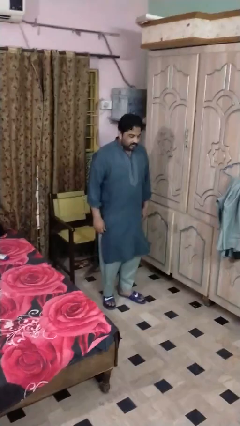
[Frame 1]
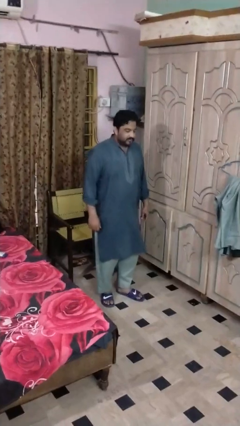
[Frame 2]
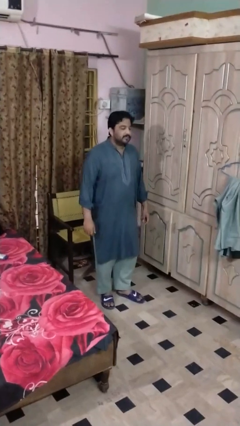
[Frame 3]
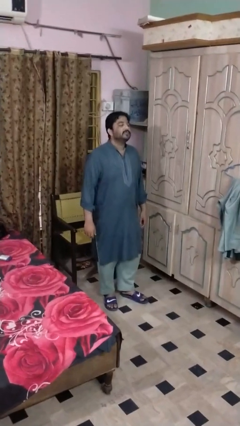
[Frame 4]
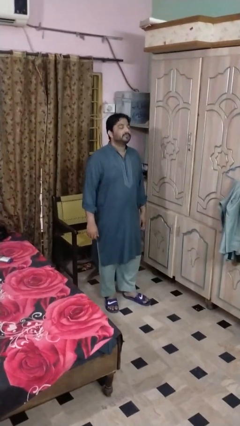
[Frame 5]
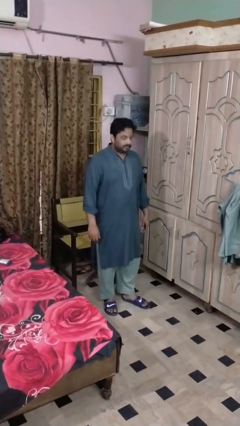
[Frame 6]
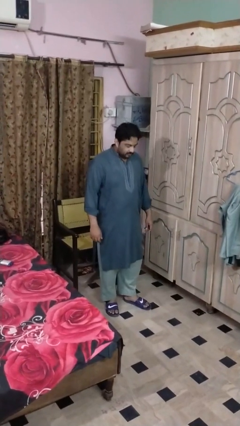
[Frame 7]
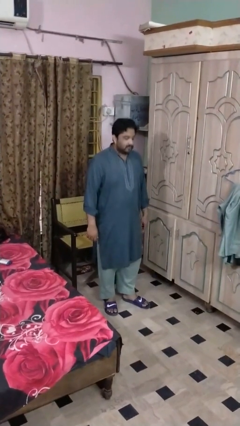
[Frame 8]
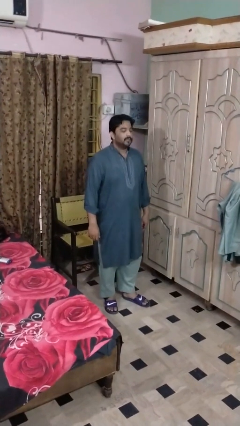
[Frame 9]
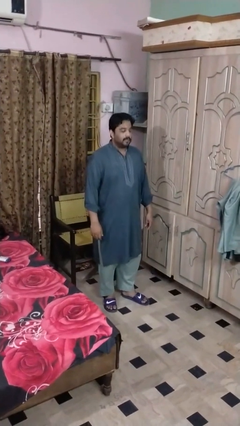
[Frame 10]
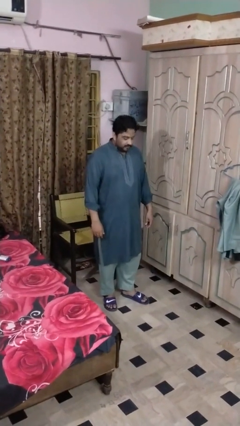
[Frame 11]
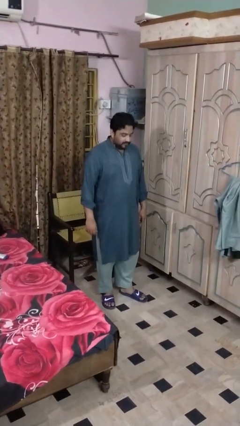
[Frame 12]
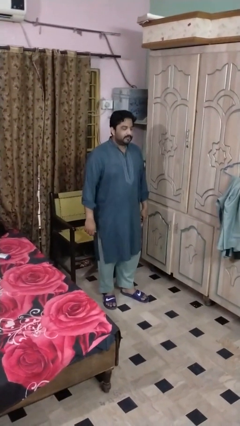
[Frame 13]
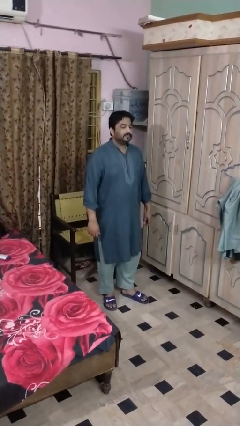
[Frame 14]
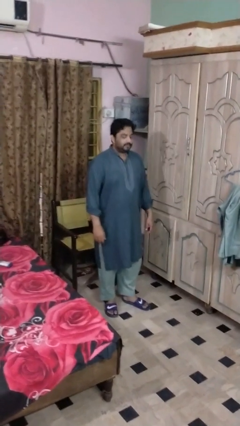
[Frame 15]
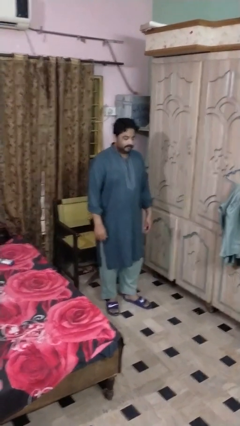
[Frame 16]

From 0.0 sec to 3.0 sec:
person nods head

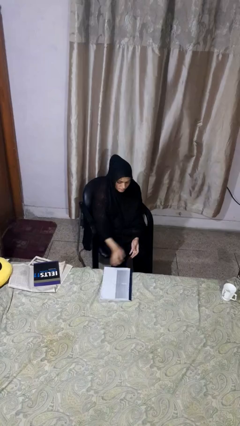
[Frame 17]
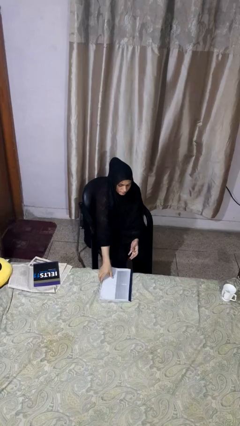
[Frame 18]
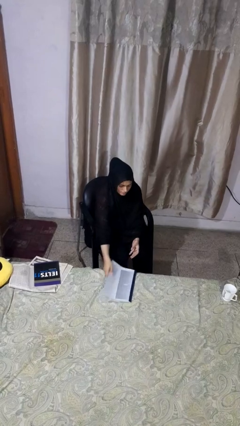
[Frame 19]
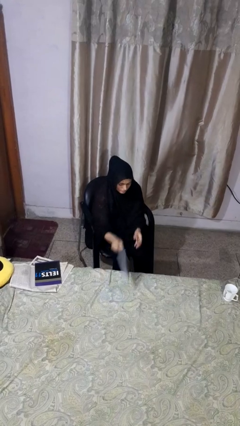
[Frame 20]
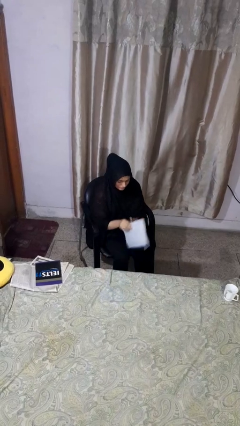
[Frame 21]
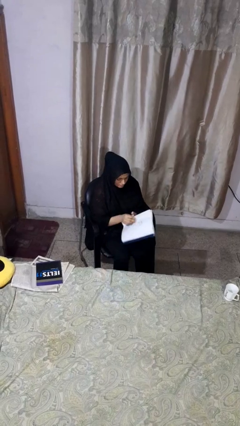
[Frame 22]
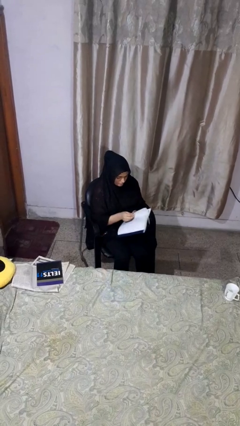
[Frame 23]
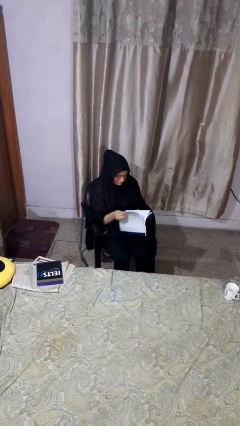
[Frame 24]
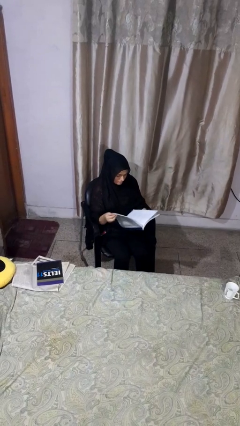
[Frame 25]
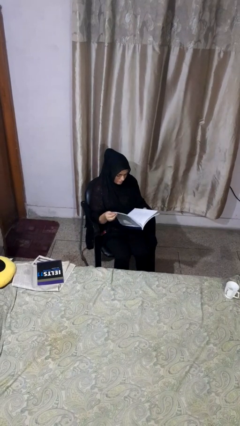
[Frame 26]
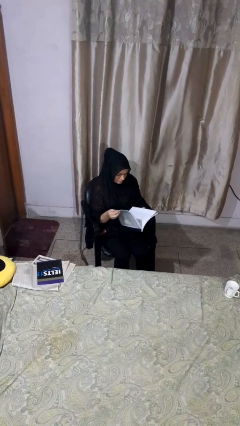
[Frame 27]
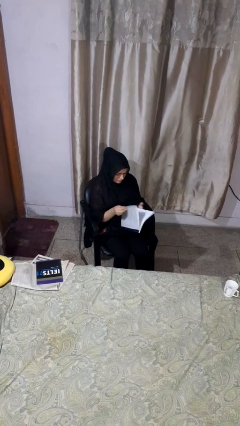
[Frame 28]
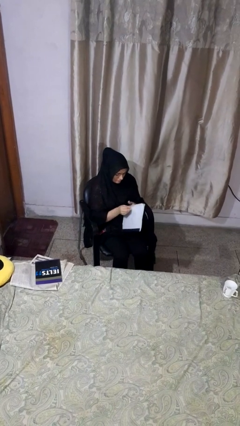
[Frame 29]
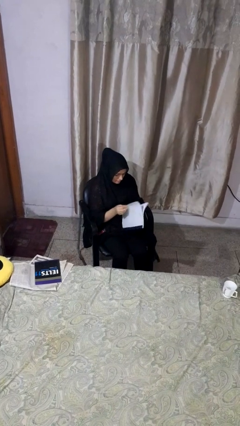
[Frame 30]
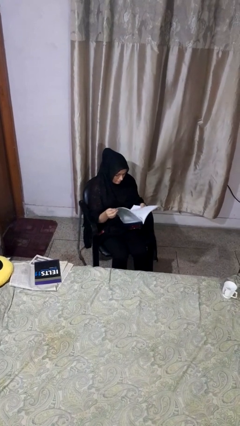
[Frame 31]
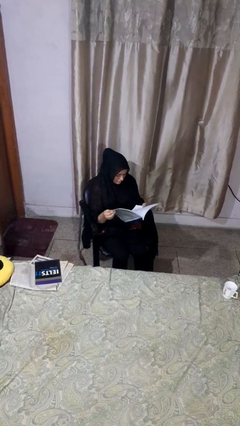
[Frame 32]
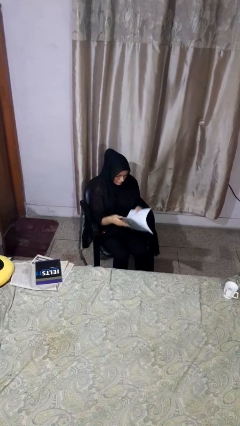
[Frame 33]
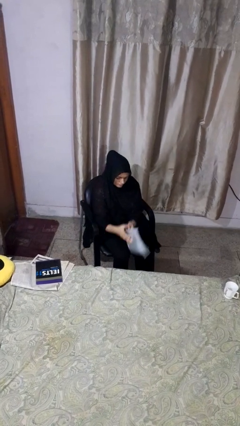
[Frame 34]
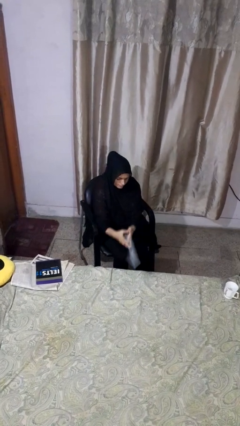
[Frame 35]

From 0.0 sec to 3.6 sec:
person reads magazine

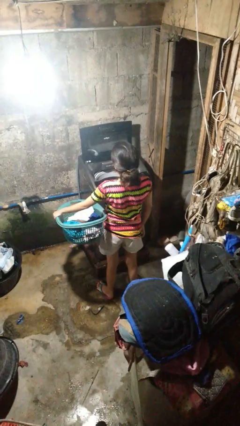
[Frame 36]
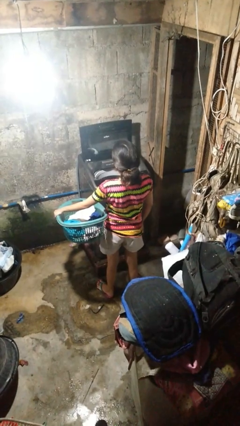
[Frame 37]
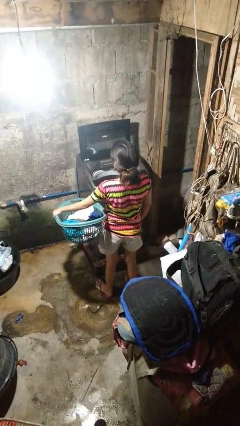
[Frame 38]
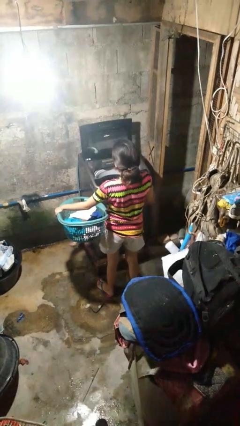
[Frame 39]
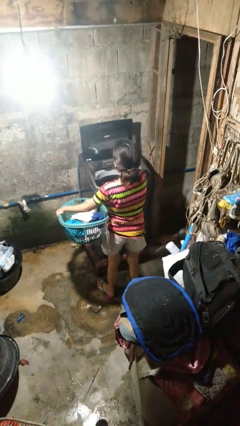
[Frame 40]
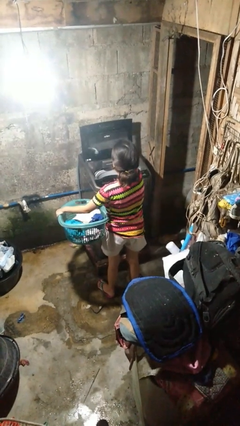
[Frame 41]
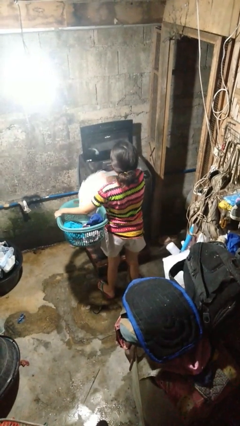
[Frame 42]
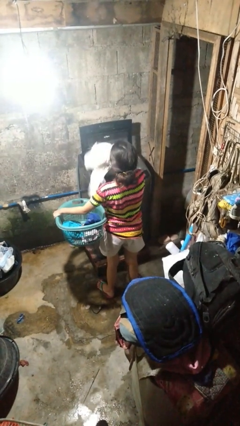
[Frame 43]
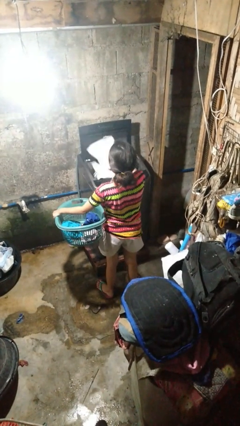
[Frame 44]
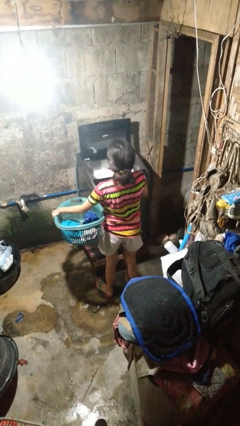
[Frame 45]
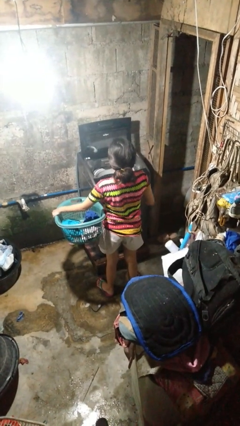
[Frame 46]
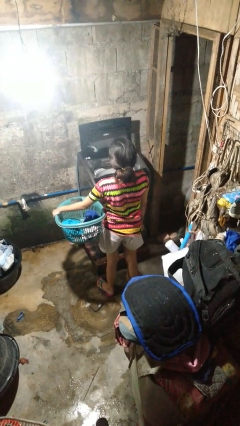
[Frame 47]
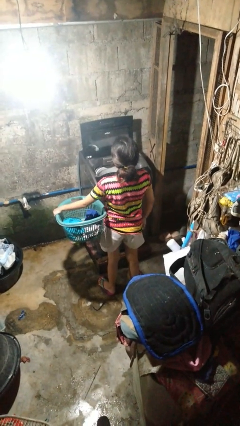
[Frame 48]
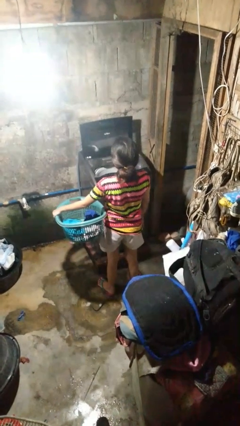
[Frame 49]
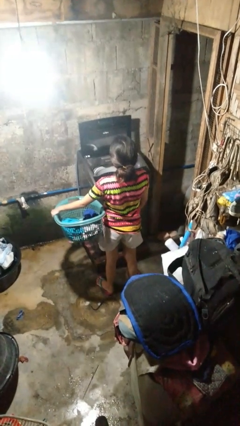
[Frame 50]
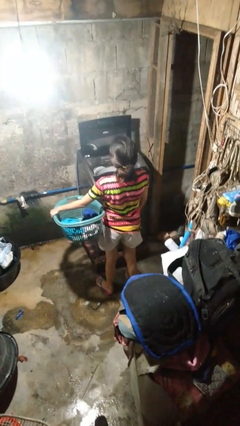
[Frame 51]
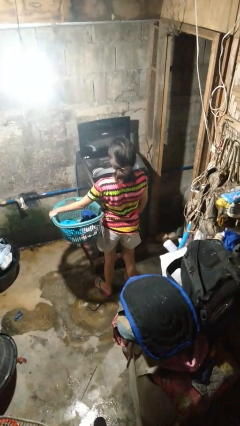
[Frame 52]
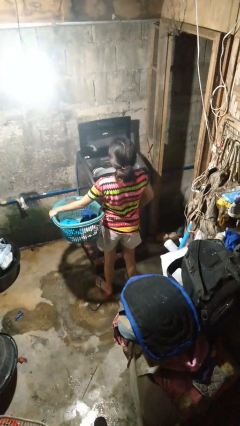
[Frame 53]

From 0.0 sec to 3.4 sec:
person loads clotheswasher

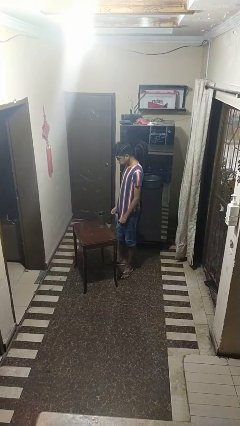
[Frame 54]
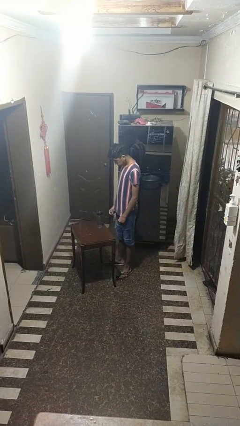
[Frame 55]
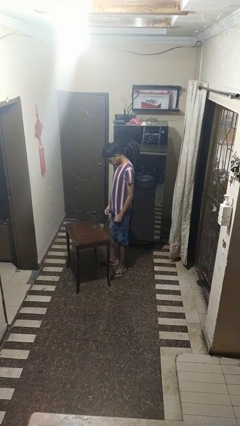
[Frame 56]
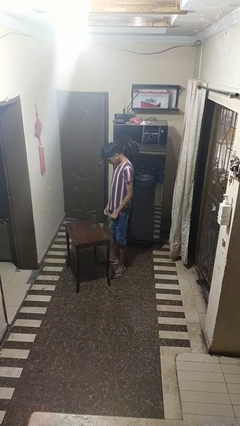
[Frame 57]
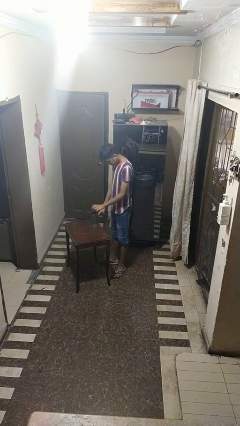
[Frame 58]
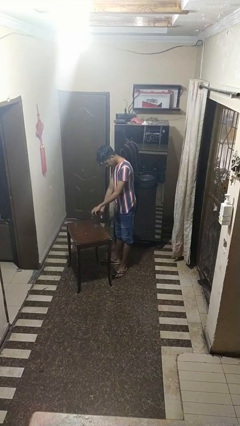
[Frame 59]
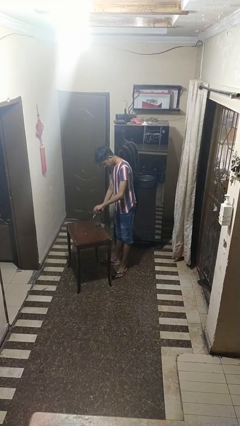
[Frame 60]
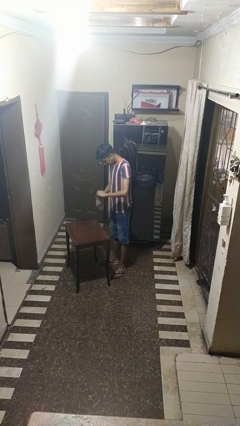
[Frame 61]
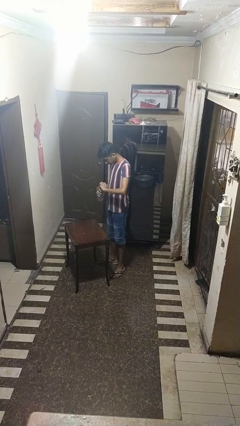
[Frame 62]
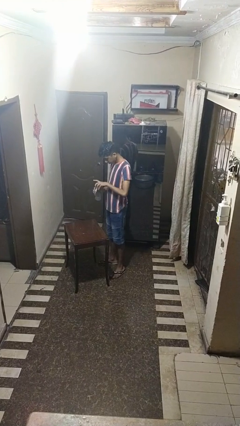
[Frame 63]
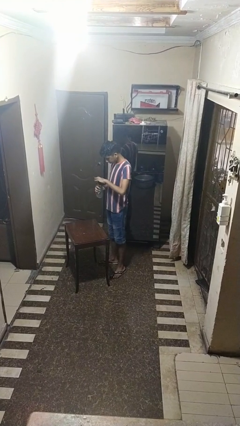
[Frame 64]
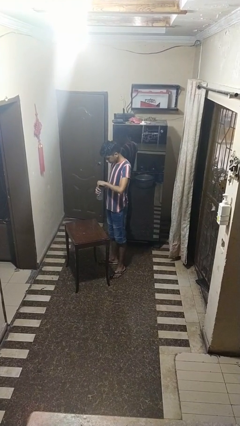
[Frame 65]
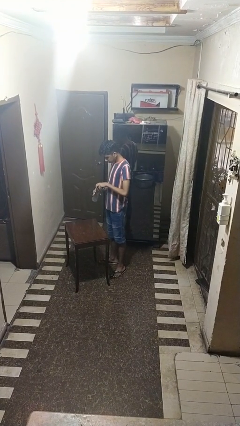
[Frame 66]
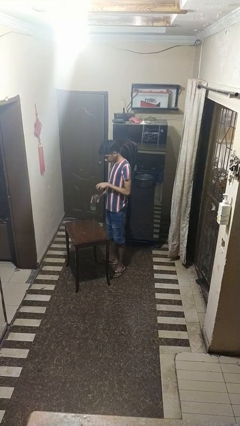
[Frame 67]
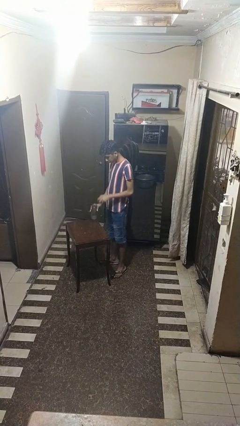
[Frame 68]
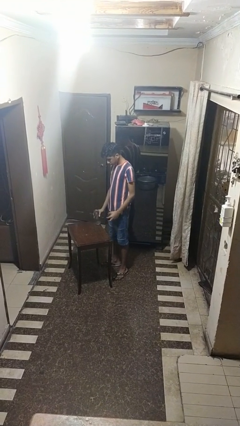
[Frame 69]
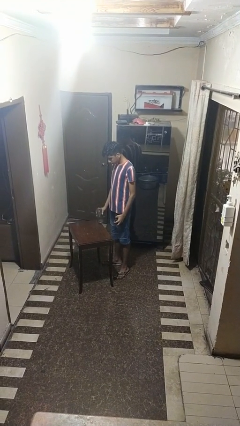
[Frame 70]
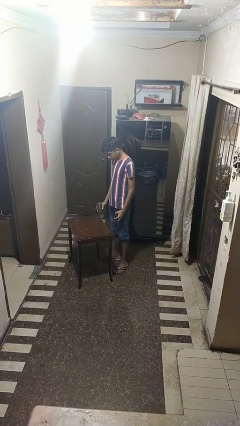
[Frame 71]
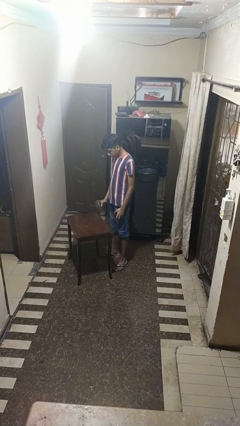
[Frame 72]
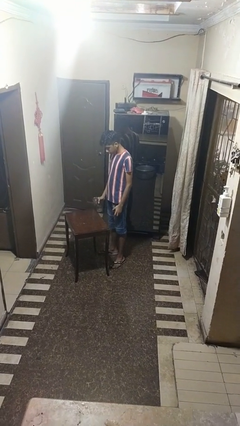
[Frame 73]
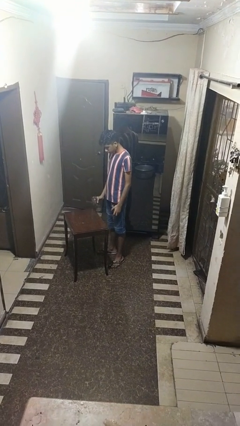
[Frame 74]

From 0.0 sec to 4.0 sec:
person unscrews lid from bottle

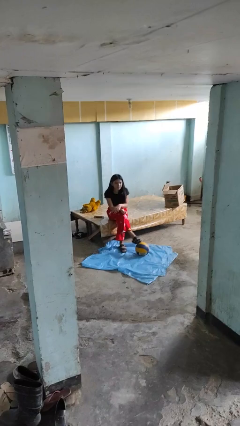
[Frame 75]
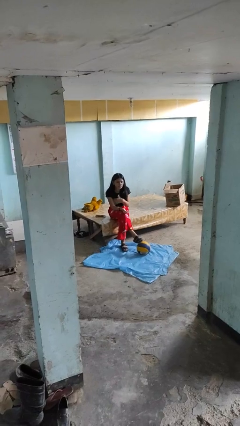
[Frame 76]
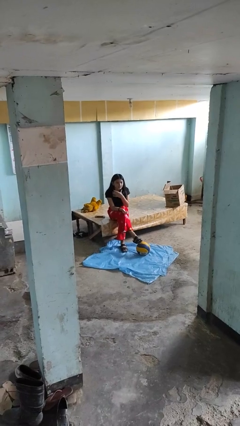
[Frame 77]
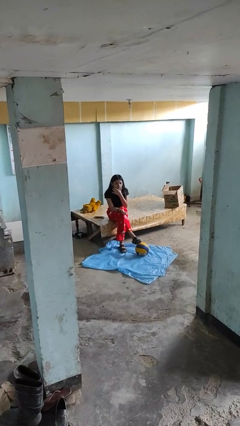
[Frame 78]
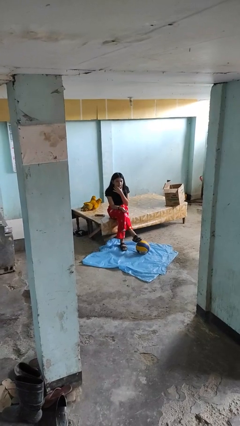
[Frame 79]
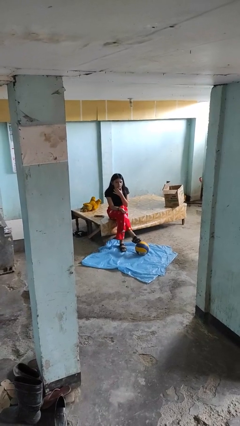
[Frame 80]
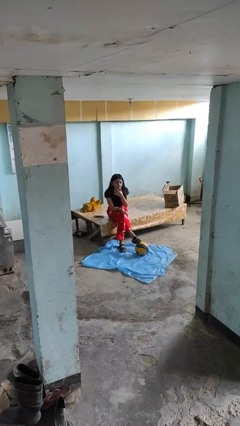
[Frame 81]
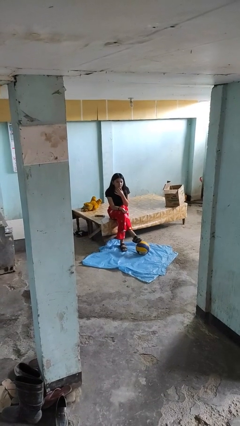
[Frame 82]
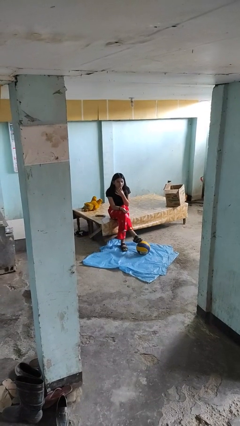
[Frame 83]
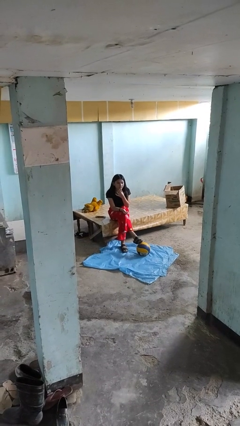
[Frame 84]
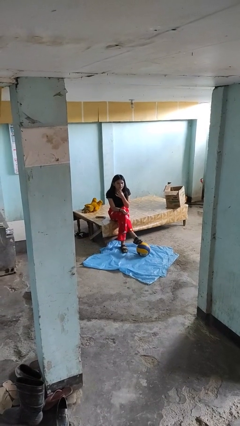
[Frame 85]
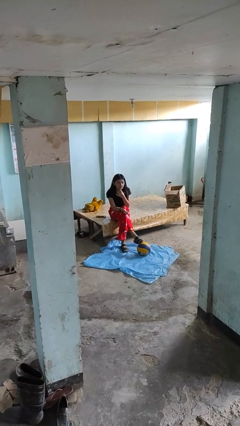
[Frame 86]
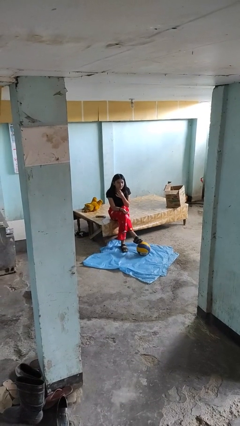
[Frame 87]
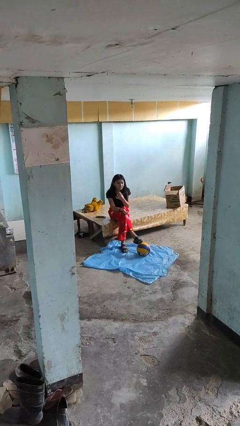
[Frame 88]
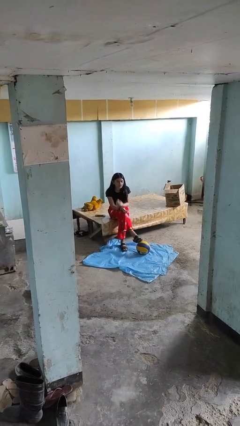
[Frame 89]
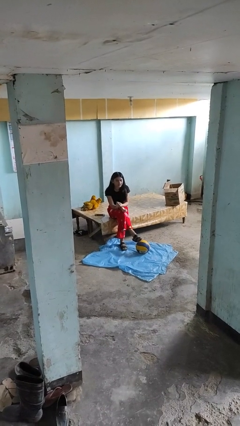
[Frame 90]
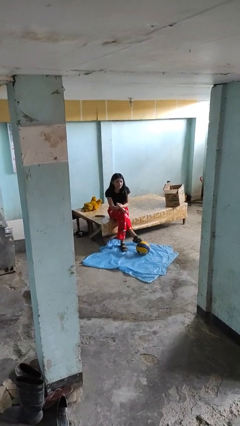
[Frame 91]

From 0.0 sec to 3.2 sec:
person strokes chin

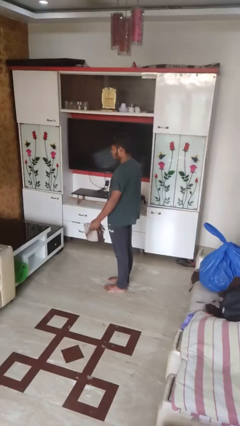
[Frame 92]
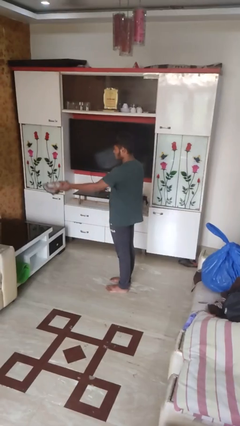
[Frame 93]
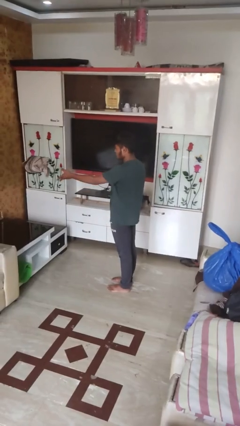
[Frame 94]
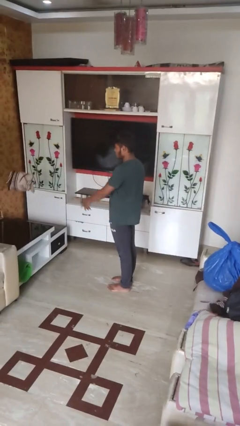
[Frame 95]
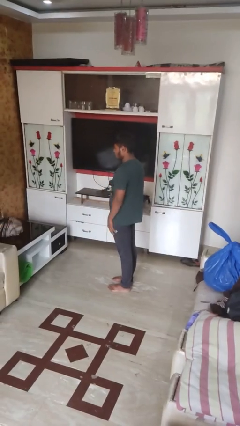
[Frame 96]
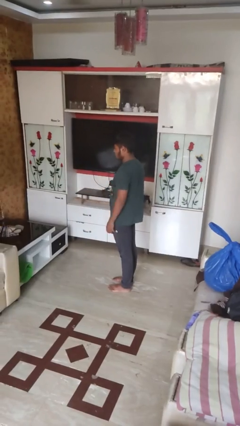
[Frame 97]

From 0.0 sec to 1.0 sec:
person throws object on table
